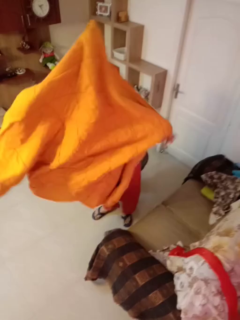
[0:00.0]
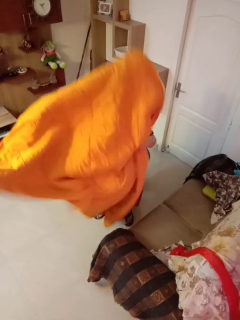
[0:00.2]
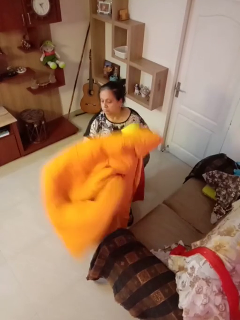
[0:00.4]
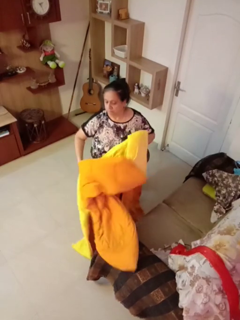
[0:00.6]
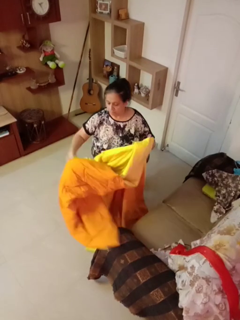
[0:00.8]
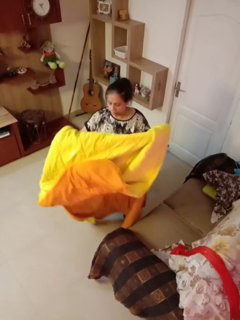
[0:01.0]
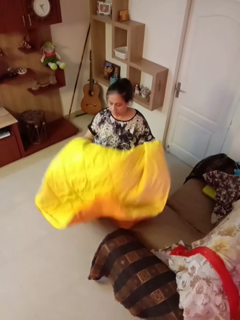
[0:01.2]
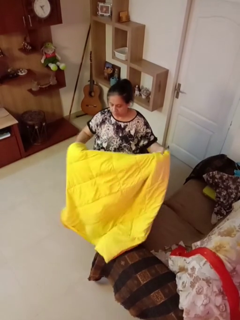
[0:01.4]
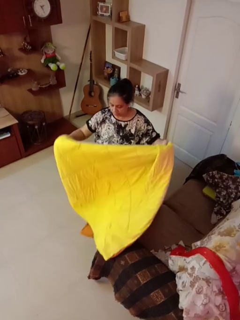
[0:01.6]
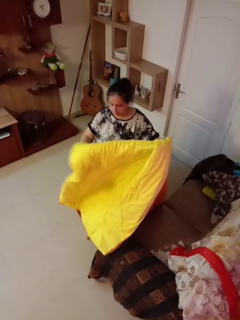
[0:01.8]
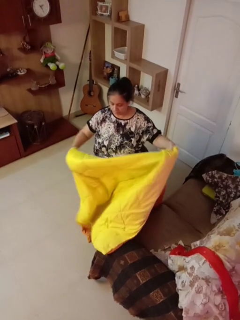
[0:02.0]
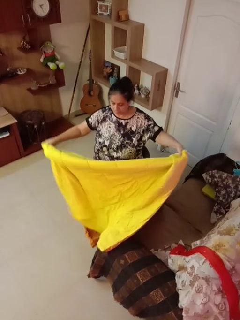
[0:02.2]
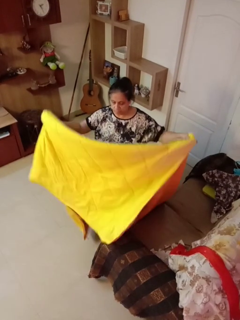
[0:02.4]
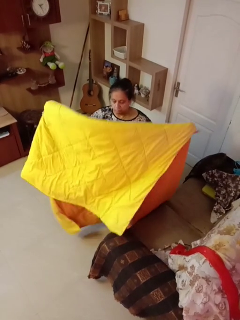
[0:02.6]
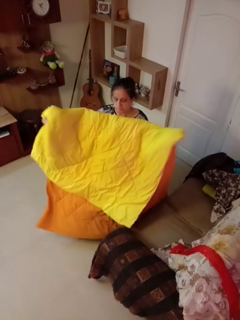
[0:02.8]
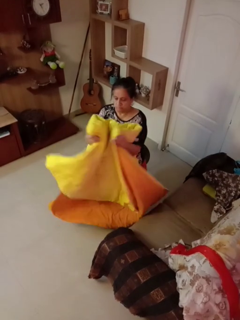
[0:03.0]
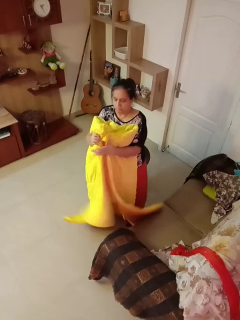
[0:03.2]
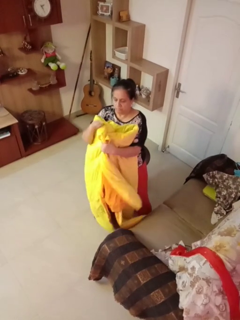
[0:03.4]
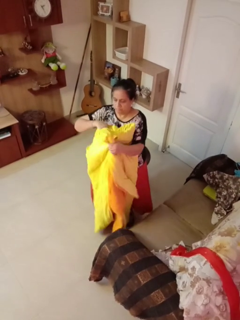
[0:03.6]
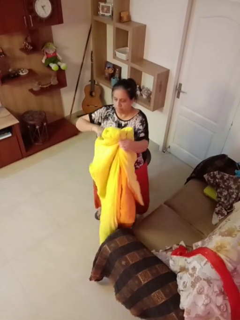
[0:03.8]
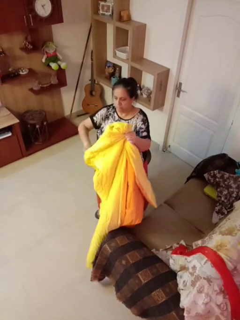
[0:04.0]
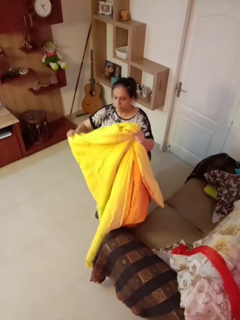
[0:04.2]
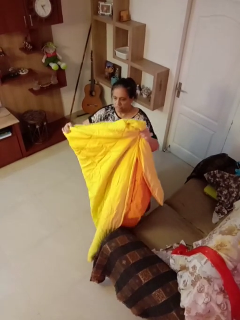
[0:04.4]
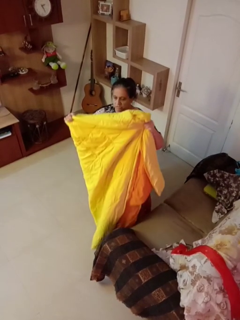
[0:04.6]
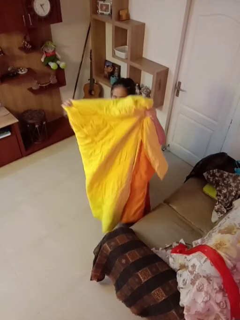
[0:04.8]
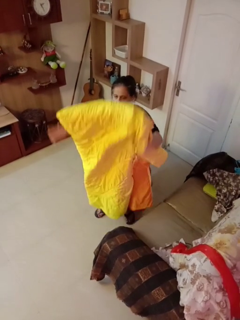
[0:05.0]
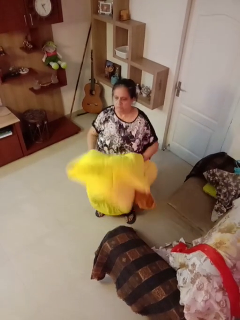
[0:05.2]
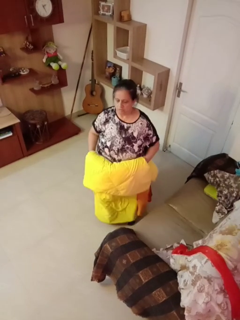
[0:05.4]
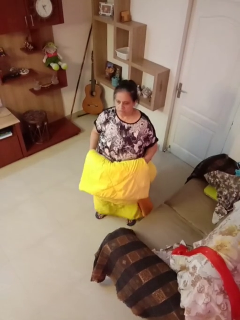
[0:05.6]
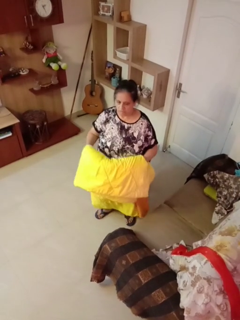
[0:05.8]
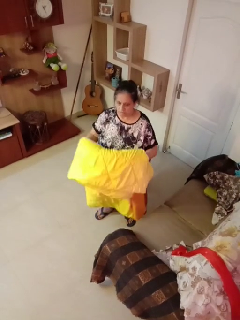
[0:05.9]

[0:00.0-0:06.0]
person folds blanket

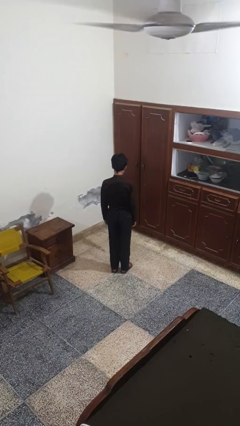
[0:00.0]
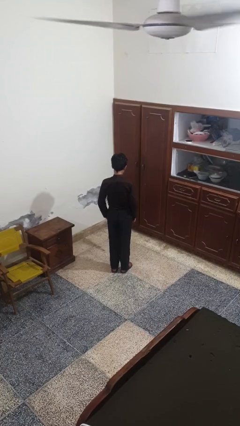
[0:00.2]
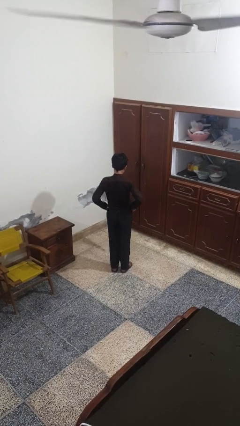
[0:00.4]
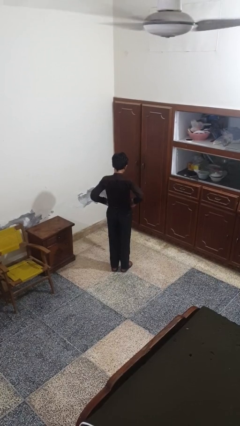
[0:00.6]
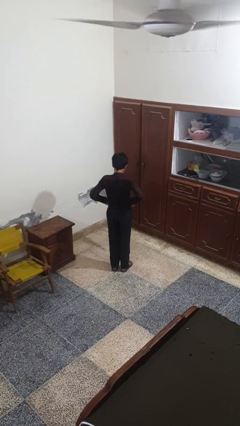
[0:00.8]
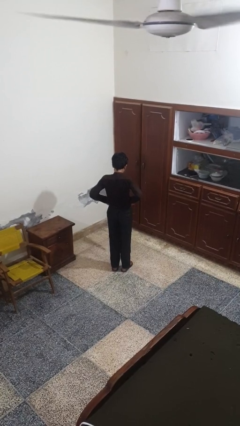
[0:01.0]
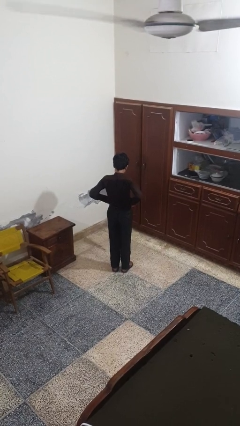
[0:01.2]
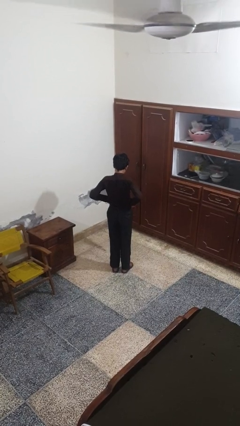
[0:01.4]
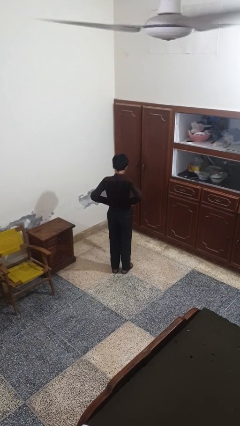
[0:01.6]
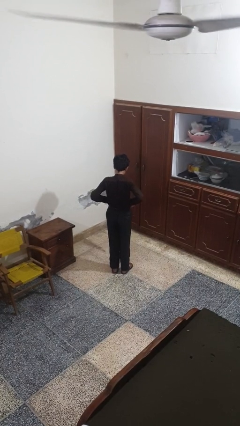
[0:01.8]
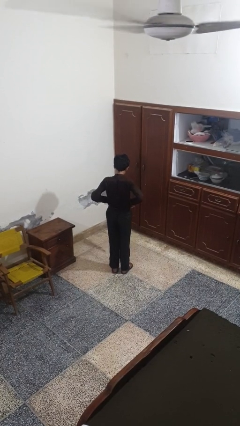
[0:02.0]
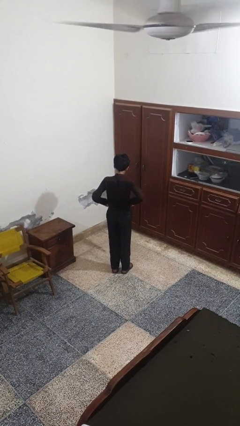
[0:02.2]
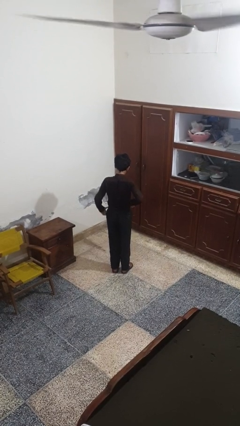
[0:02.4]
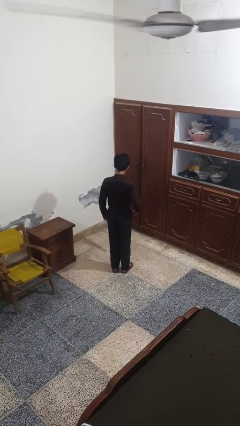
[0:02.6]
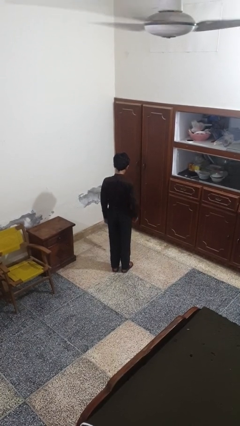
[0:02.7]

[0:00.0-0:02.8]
person hikes up pants

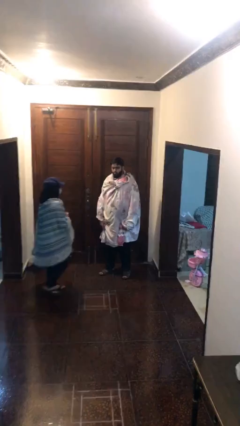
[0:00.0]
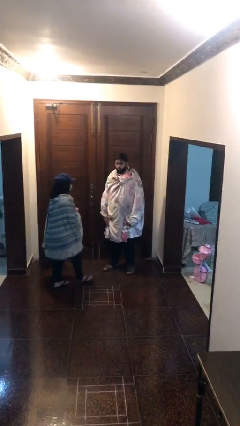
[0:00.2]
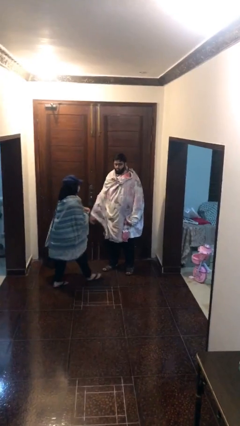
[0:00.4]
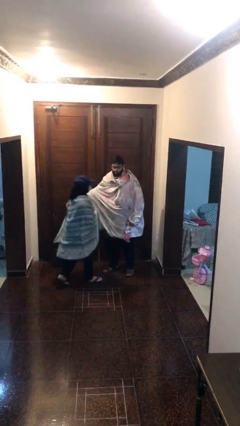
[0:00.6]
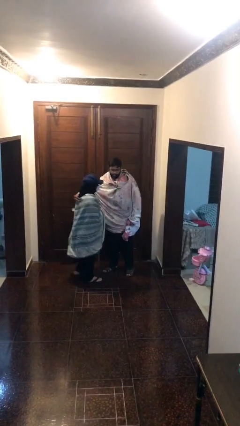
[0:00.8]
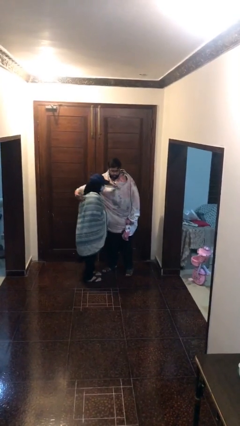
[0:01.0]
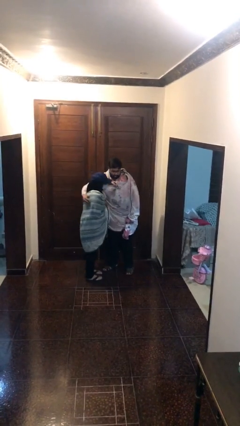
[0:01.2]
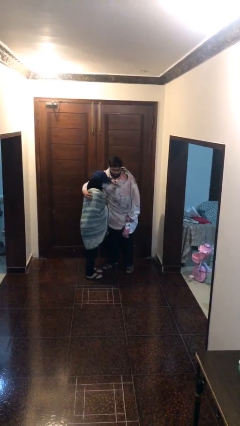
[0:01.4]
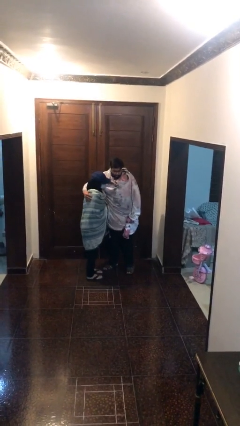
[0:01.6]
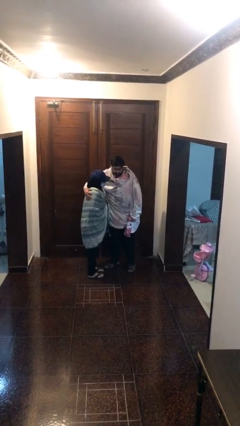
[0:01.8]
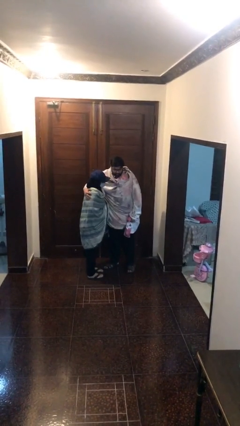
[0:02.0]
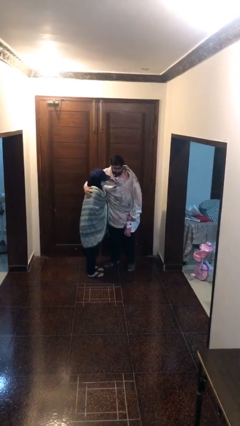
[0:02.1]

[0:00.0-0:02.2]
person embraces person

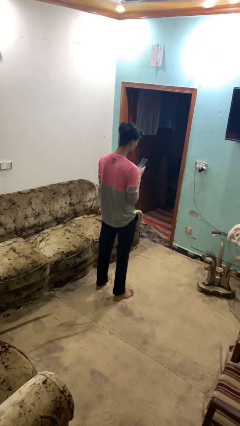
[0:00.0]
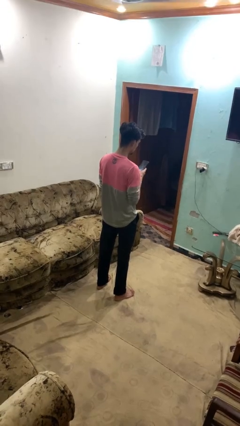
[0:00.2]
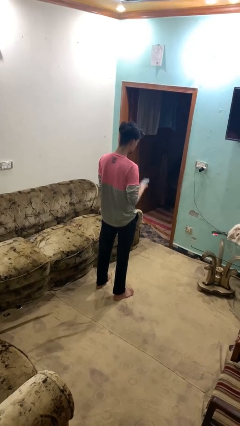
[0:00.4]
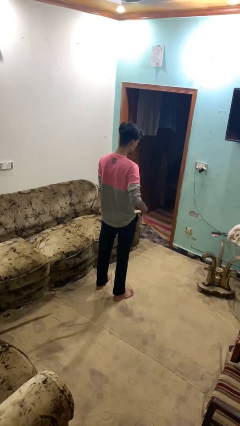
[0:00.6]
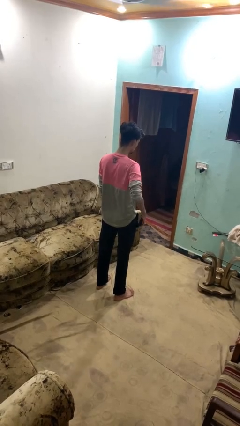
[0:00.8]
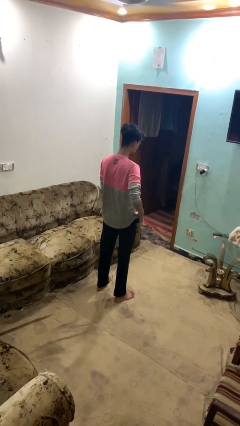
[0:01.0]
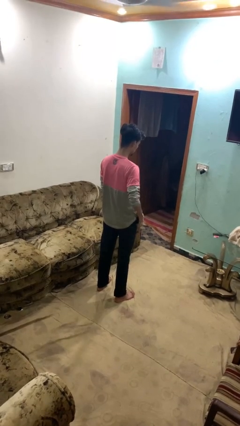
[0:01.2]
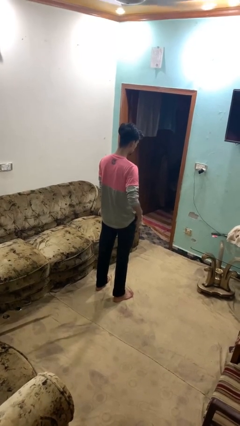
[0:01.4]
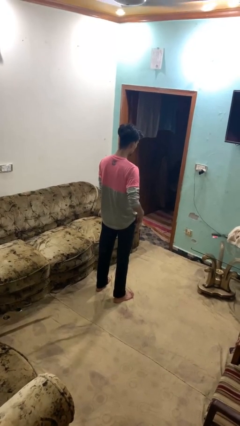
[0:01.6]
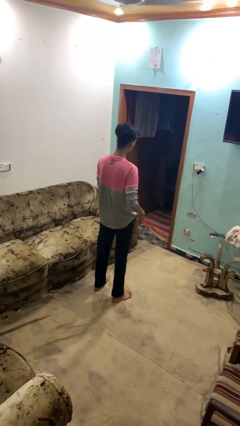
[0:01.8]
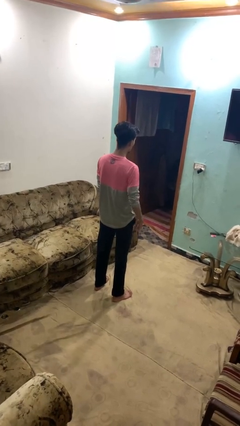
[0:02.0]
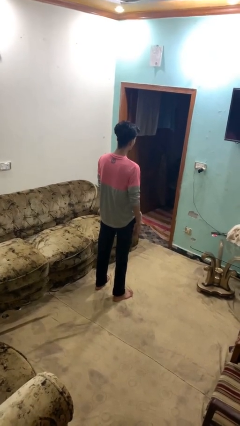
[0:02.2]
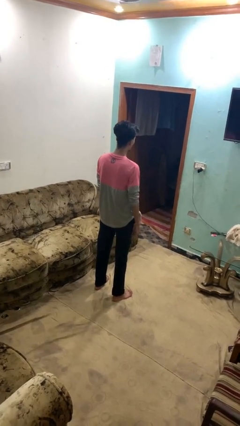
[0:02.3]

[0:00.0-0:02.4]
person puts phone into pocket

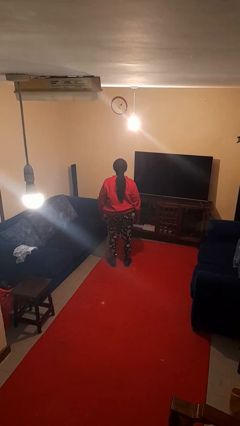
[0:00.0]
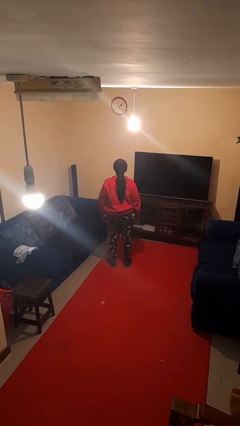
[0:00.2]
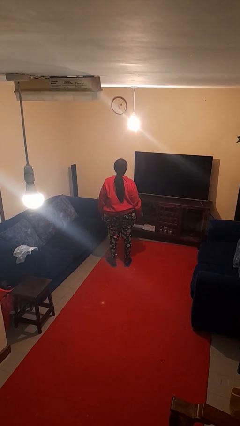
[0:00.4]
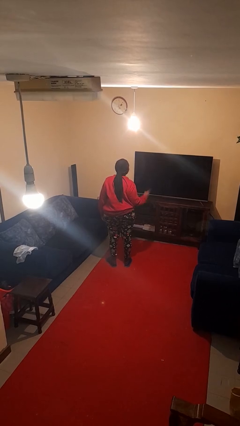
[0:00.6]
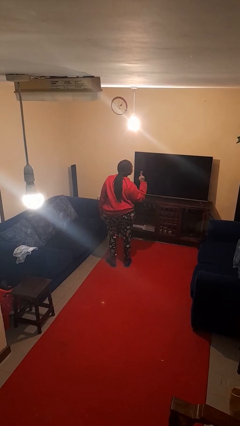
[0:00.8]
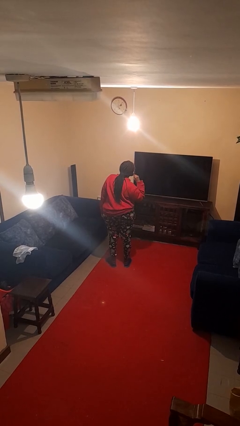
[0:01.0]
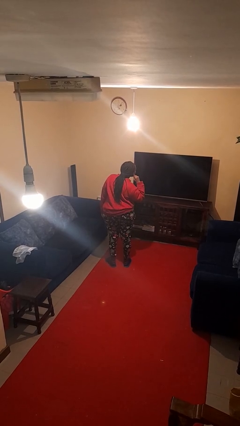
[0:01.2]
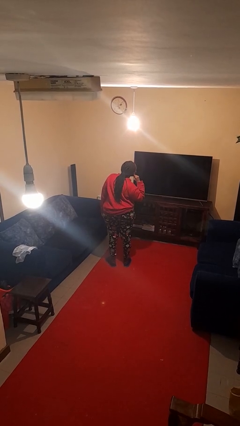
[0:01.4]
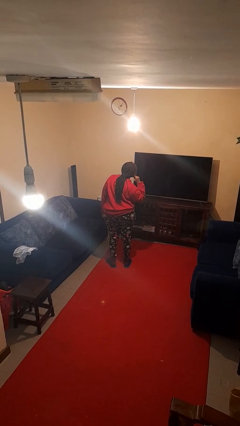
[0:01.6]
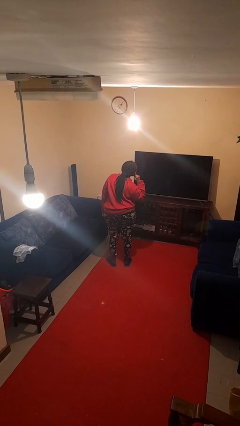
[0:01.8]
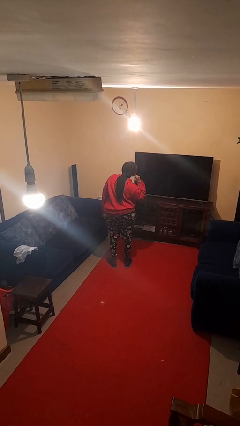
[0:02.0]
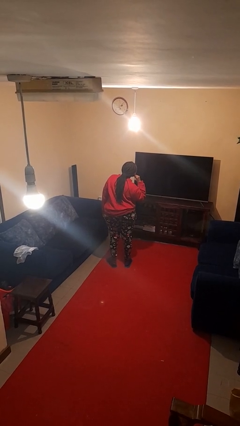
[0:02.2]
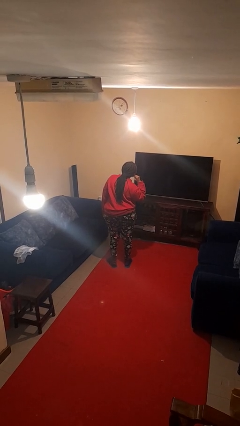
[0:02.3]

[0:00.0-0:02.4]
person gestures listen closely

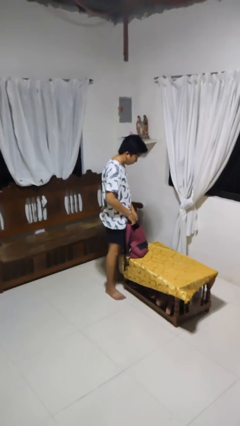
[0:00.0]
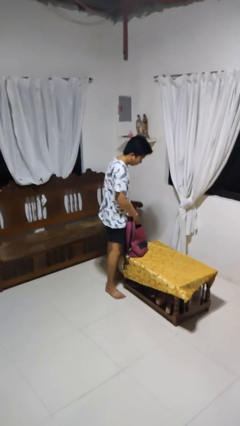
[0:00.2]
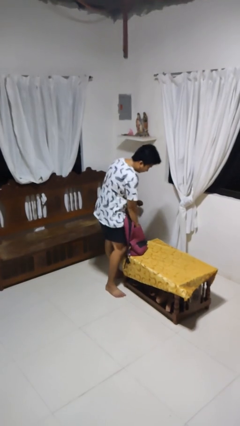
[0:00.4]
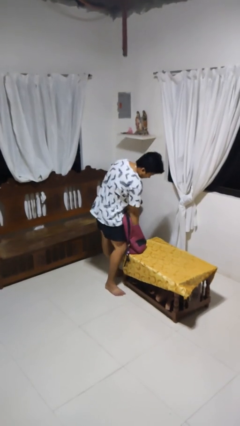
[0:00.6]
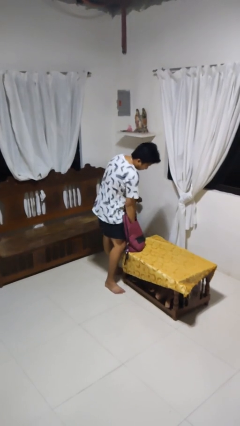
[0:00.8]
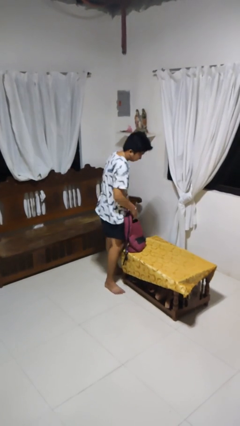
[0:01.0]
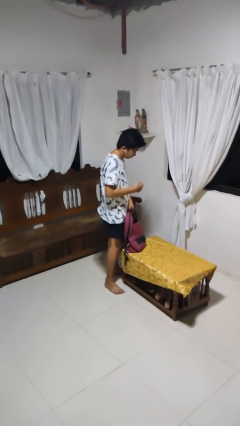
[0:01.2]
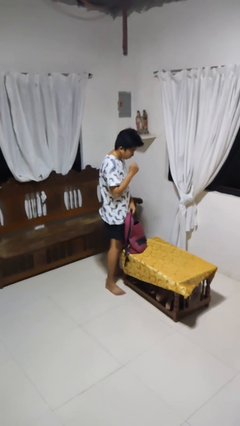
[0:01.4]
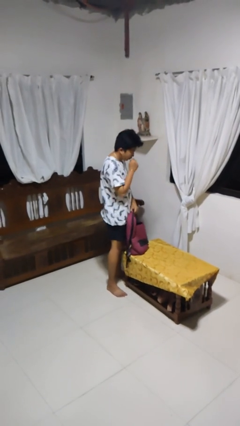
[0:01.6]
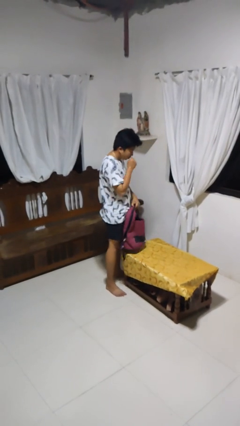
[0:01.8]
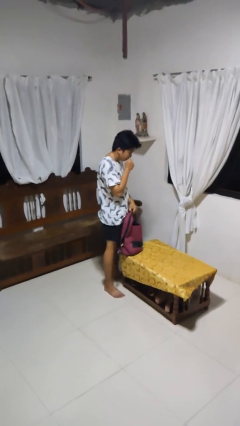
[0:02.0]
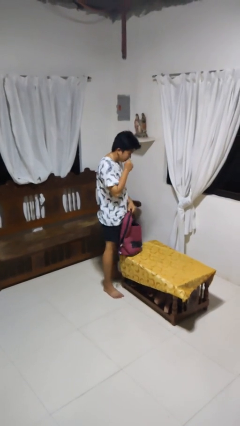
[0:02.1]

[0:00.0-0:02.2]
person eats snack from bag
